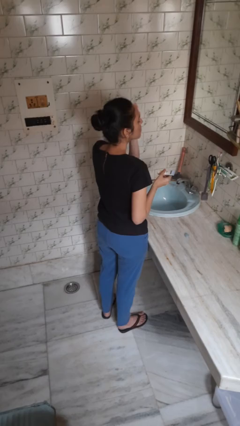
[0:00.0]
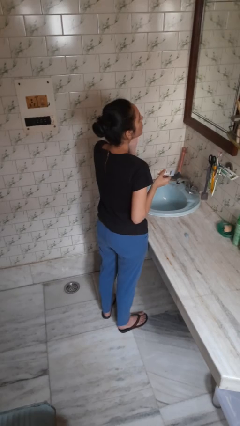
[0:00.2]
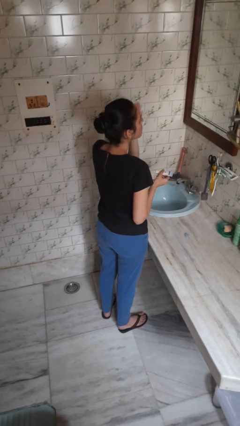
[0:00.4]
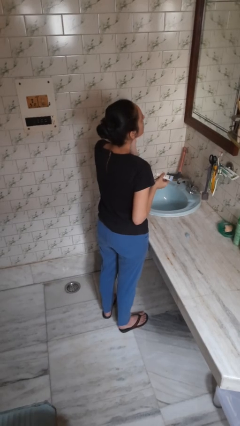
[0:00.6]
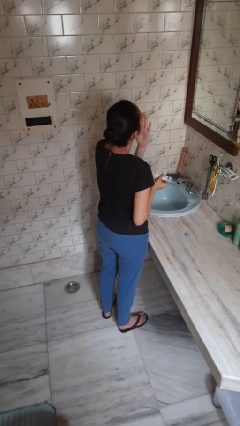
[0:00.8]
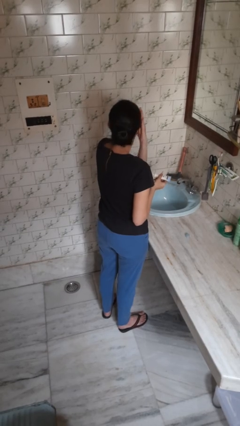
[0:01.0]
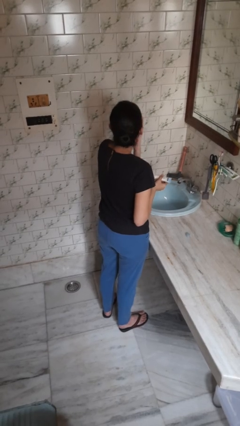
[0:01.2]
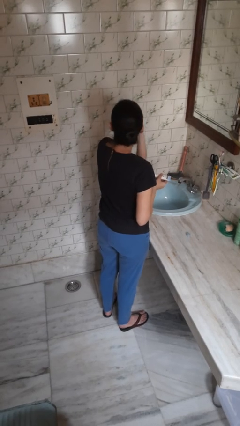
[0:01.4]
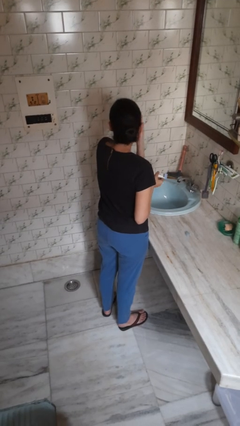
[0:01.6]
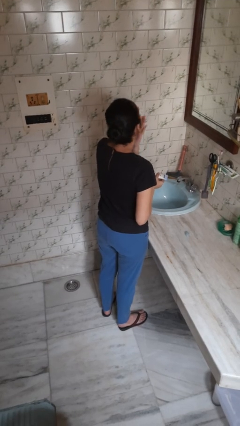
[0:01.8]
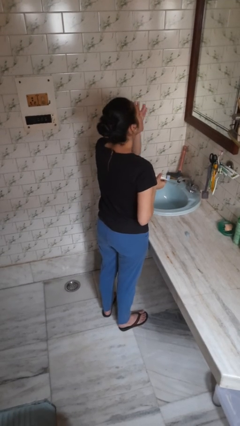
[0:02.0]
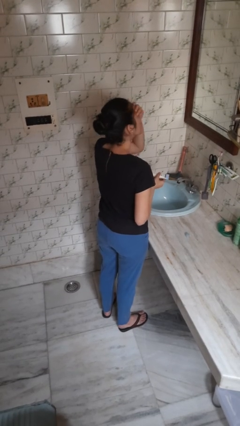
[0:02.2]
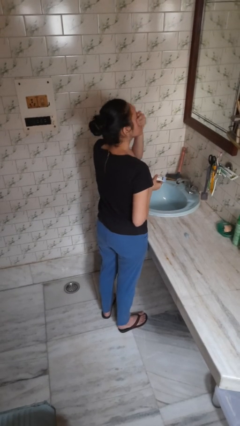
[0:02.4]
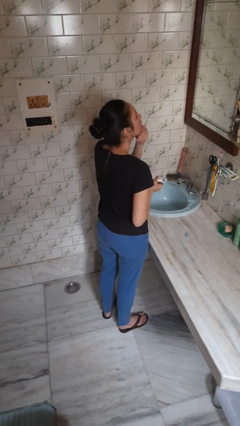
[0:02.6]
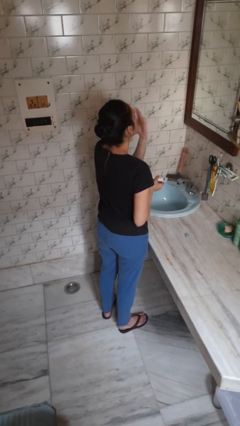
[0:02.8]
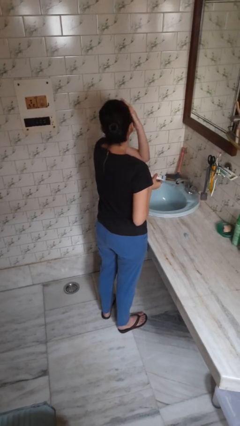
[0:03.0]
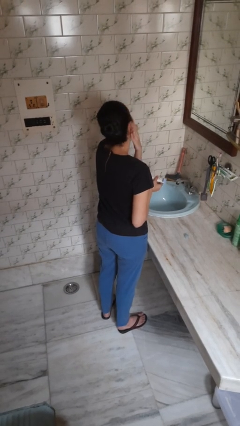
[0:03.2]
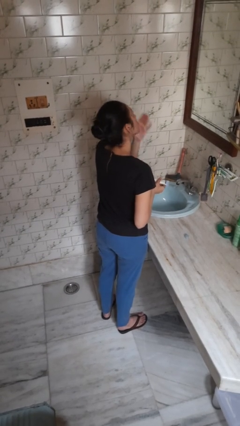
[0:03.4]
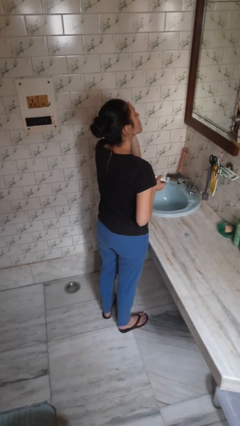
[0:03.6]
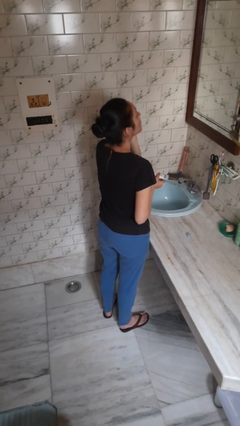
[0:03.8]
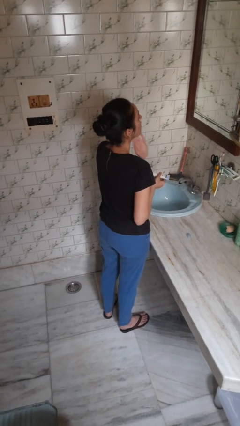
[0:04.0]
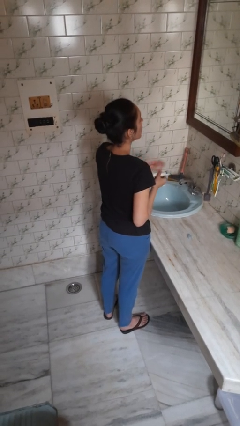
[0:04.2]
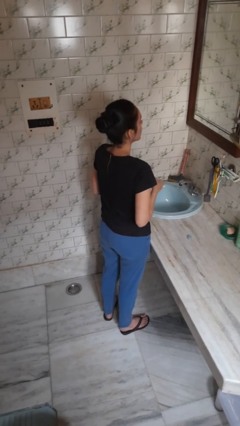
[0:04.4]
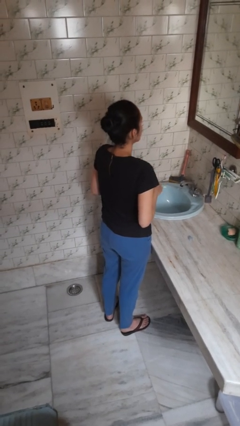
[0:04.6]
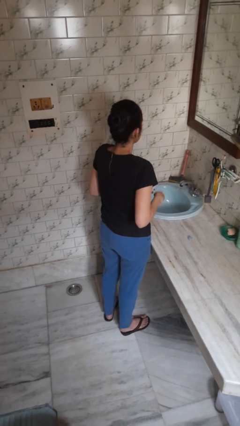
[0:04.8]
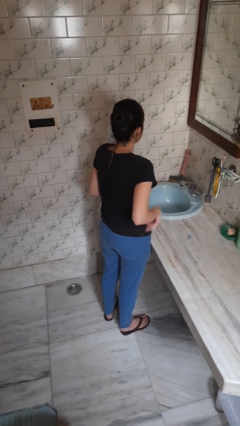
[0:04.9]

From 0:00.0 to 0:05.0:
person applies sunscreen

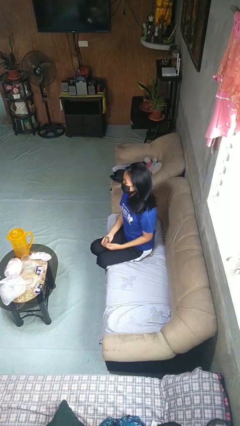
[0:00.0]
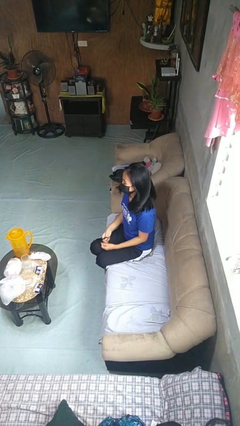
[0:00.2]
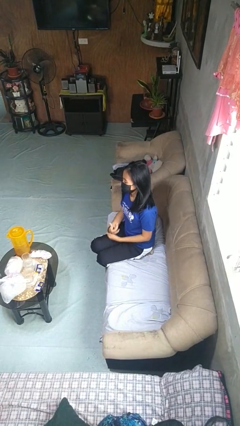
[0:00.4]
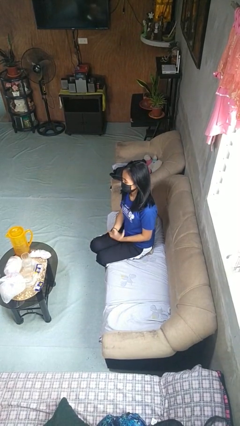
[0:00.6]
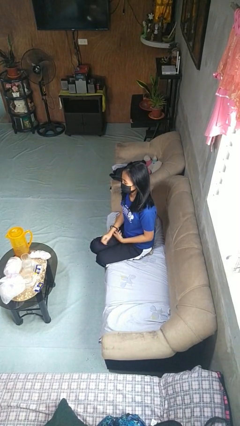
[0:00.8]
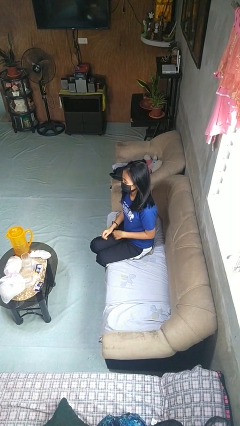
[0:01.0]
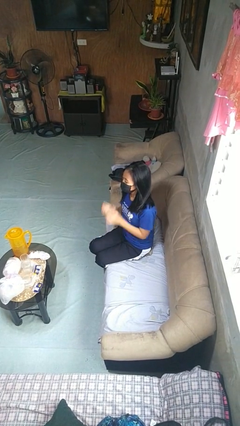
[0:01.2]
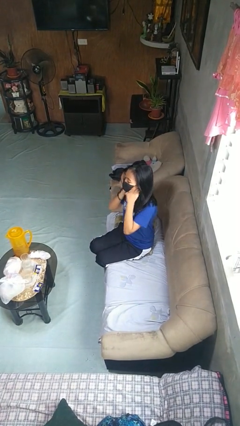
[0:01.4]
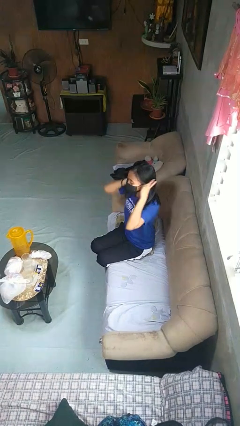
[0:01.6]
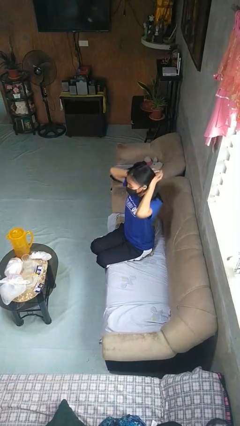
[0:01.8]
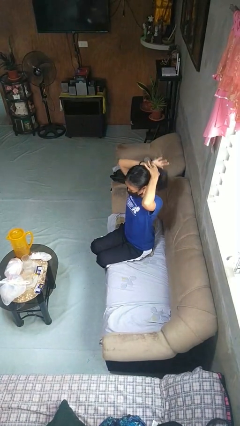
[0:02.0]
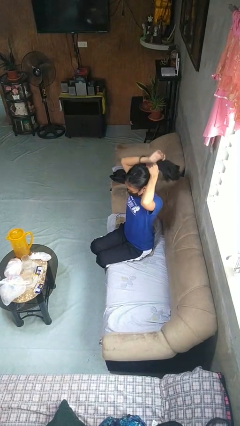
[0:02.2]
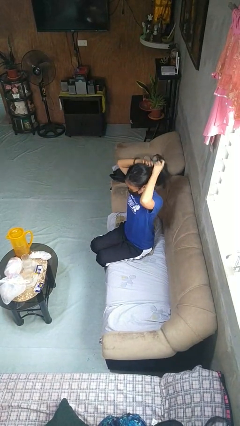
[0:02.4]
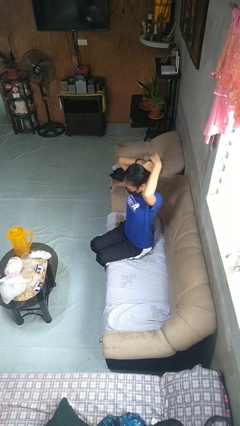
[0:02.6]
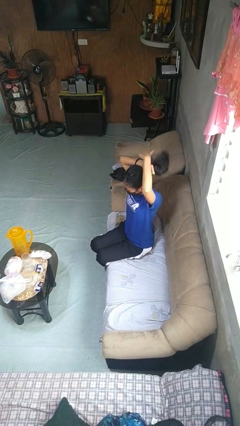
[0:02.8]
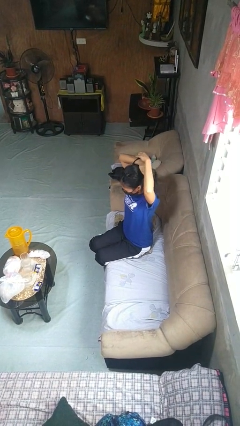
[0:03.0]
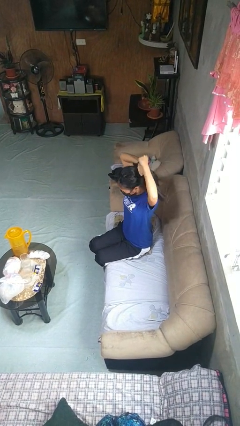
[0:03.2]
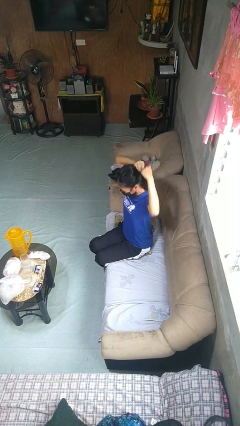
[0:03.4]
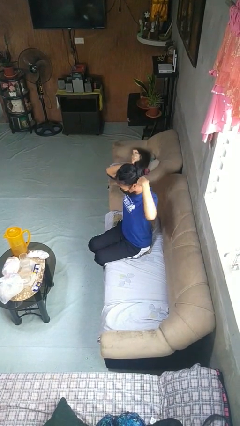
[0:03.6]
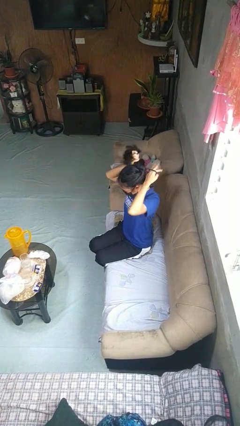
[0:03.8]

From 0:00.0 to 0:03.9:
person puts hair in ponytail

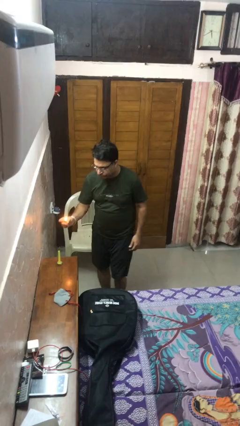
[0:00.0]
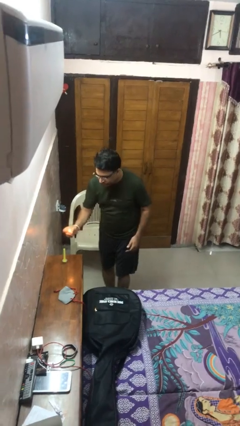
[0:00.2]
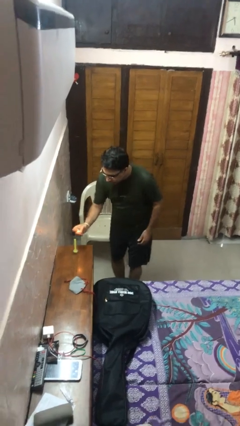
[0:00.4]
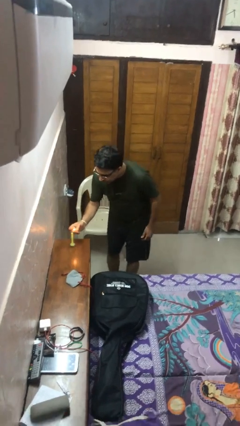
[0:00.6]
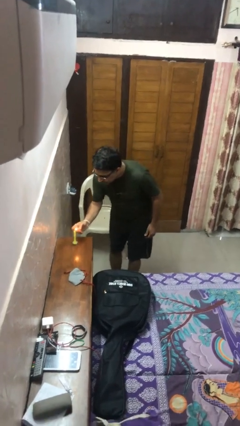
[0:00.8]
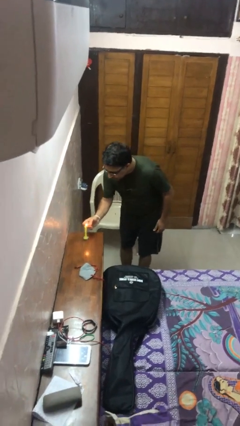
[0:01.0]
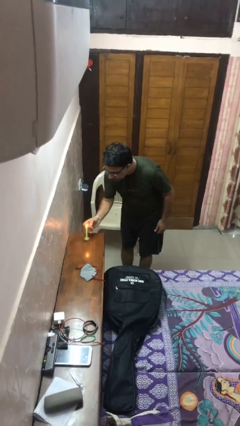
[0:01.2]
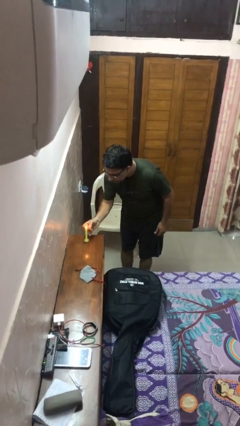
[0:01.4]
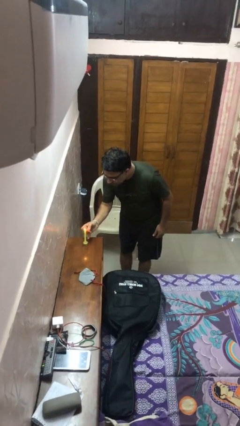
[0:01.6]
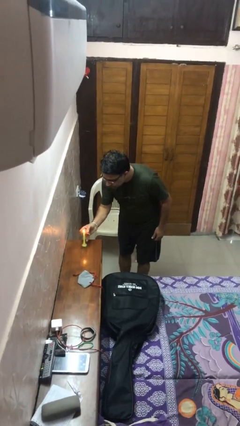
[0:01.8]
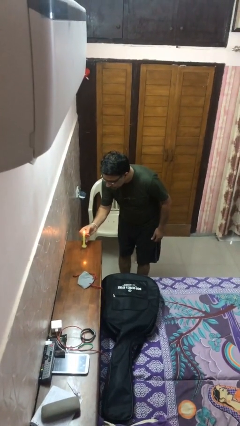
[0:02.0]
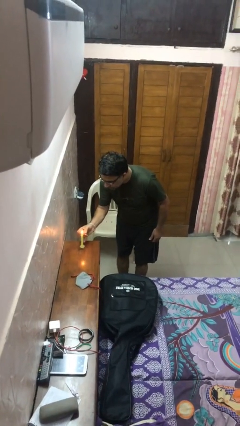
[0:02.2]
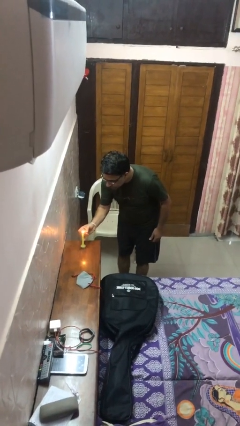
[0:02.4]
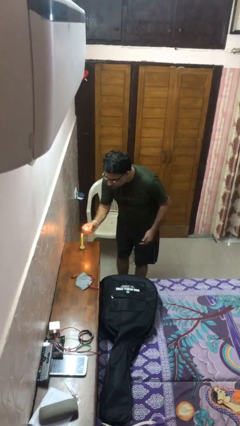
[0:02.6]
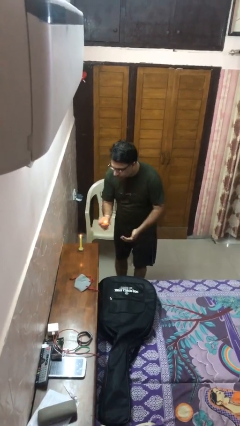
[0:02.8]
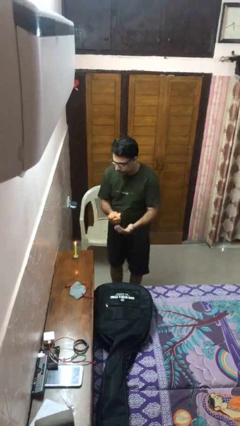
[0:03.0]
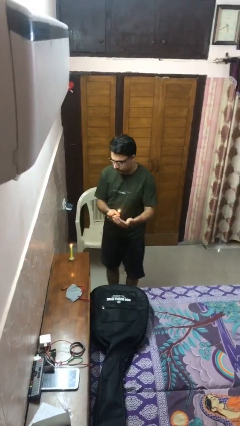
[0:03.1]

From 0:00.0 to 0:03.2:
person lights candle

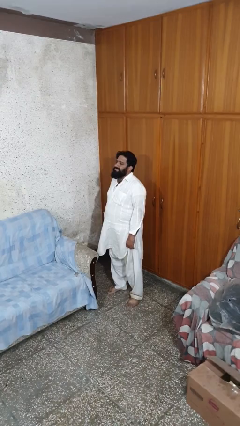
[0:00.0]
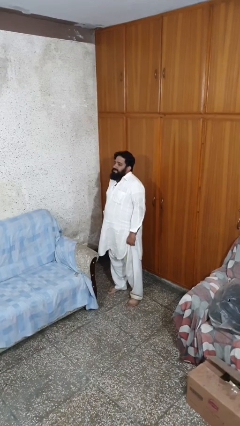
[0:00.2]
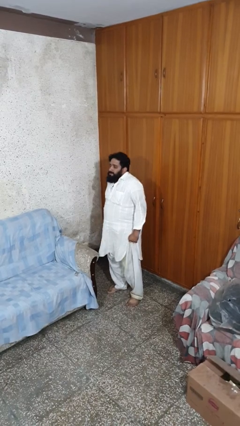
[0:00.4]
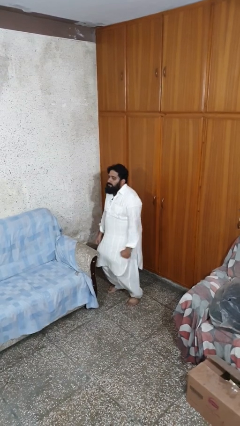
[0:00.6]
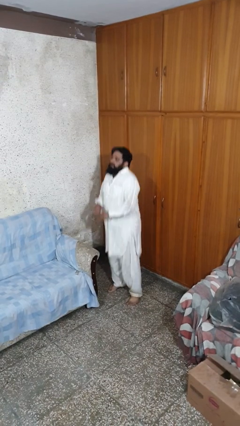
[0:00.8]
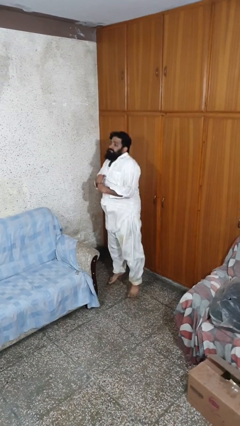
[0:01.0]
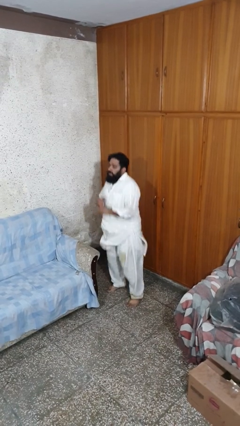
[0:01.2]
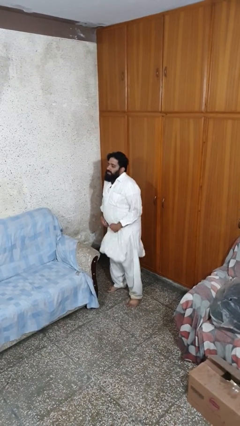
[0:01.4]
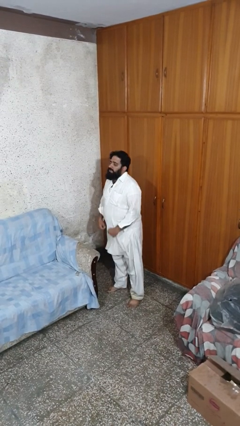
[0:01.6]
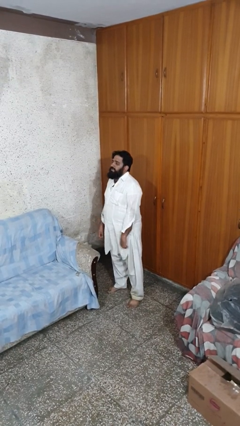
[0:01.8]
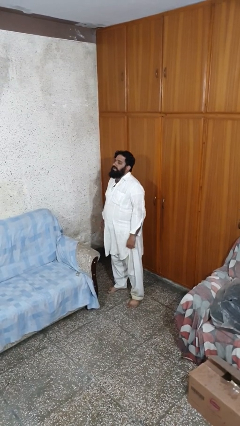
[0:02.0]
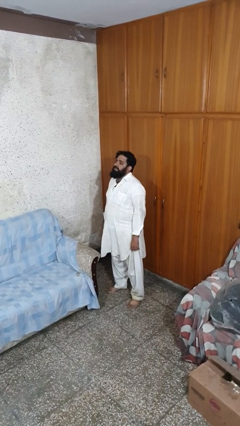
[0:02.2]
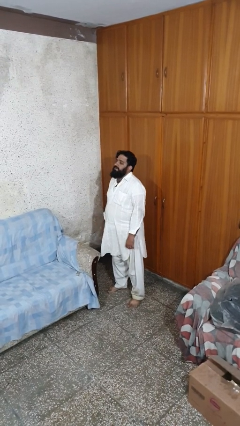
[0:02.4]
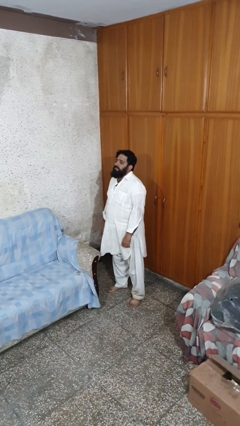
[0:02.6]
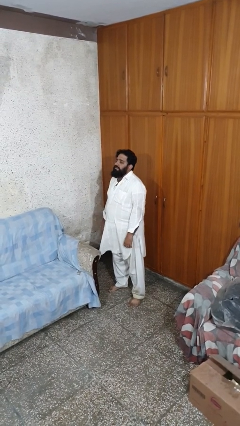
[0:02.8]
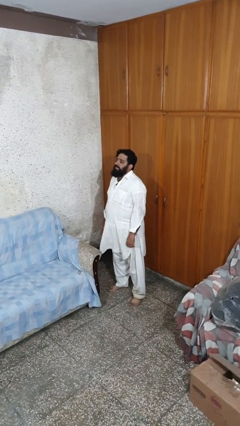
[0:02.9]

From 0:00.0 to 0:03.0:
person jumps

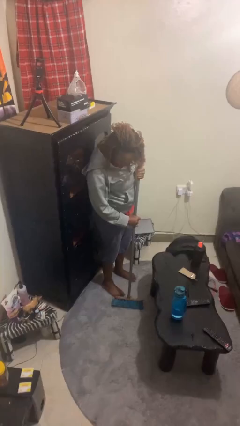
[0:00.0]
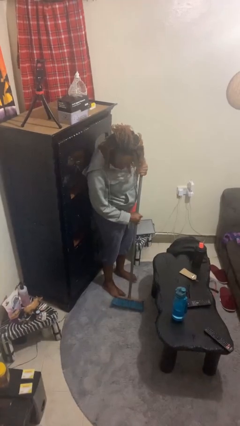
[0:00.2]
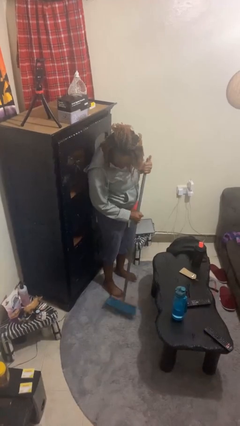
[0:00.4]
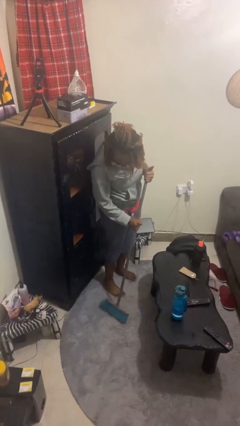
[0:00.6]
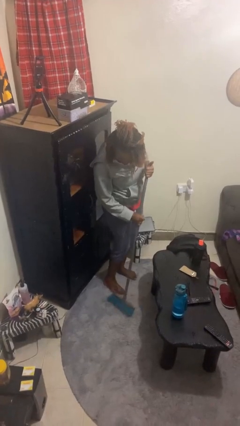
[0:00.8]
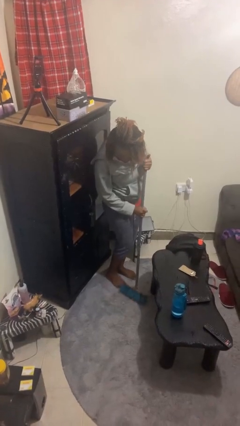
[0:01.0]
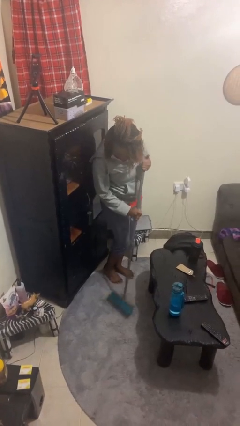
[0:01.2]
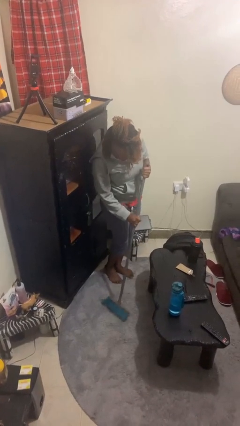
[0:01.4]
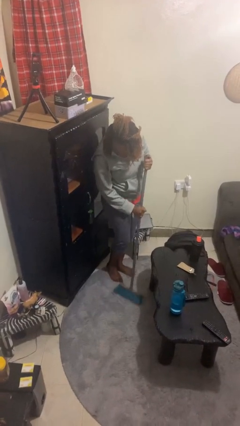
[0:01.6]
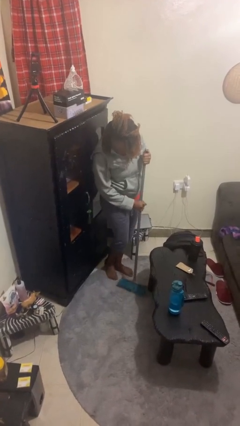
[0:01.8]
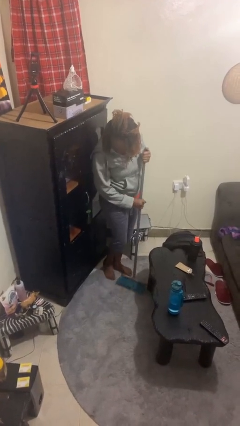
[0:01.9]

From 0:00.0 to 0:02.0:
person sweeps floor

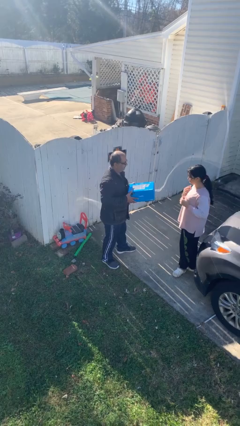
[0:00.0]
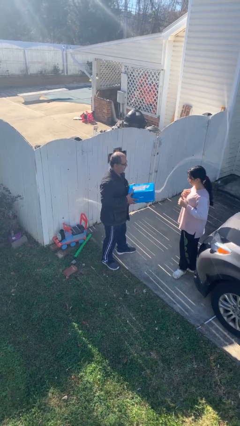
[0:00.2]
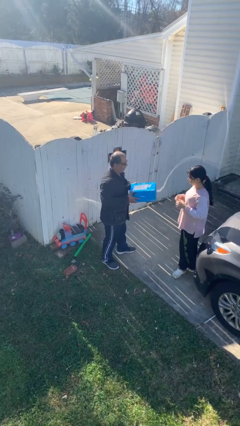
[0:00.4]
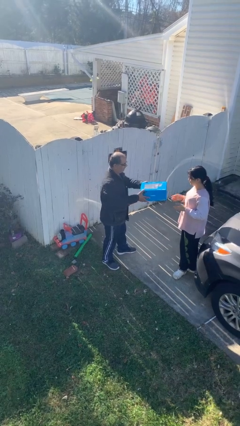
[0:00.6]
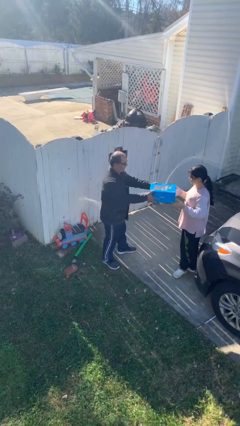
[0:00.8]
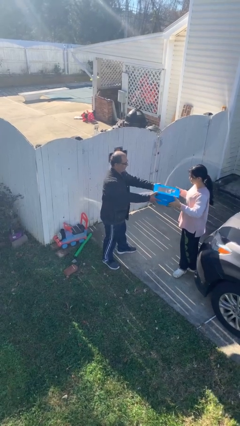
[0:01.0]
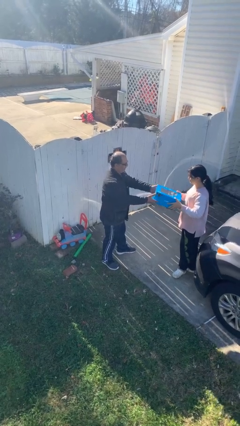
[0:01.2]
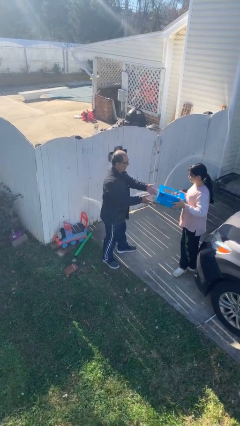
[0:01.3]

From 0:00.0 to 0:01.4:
person transfers object to person
